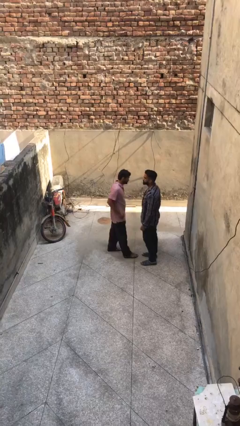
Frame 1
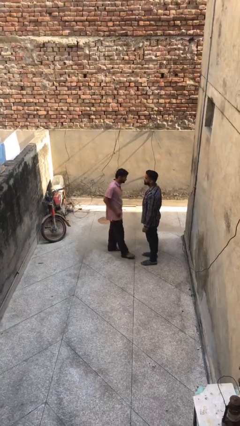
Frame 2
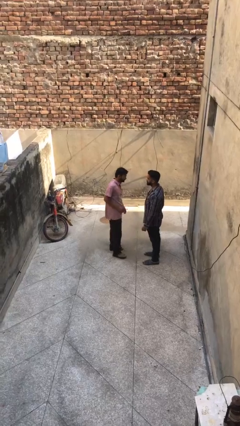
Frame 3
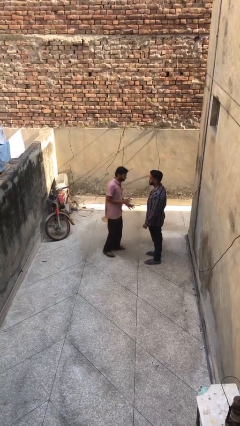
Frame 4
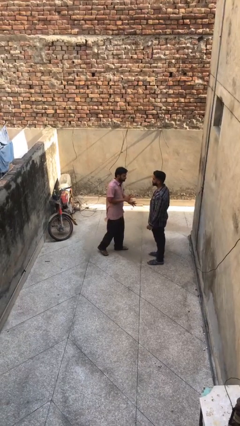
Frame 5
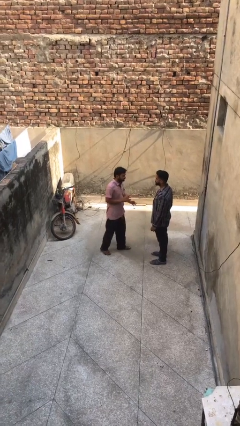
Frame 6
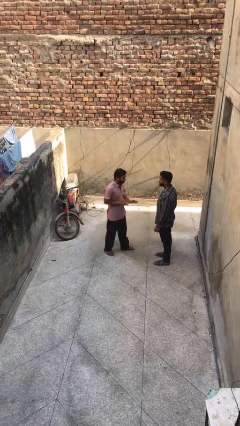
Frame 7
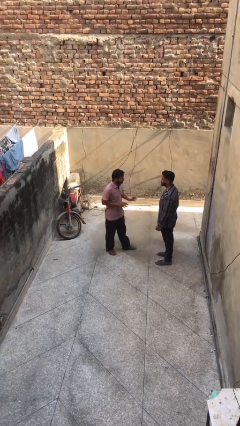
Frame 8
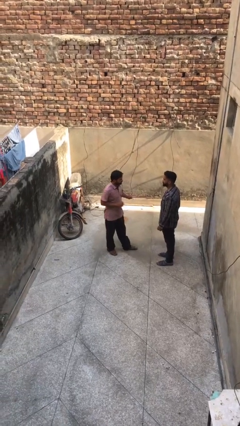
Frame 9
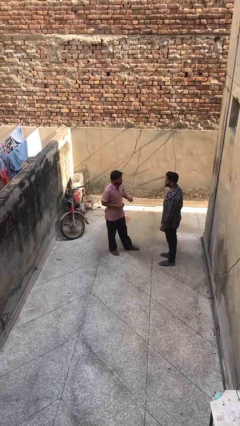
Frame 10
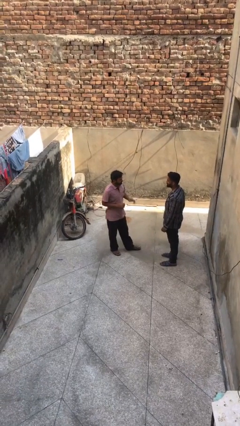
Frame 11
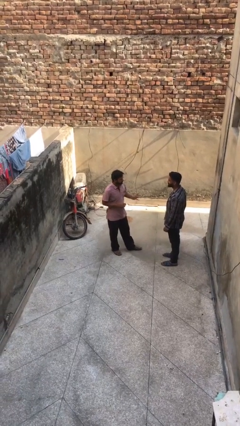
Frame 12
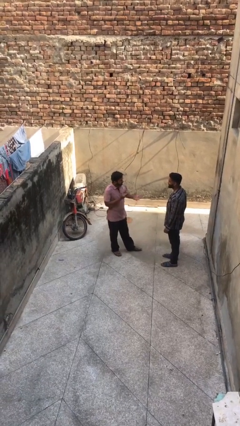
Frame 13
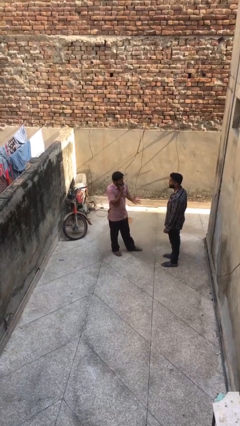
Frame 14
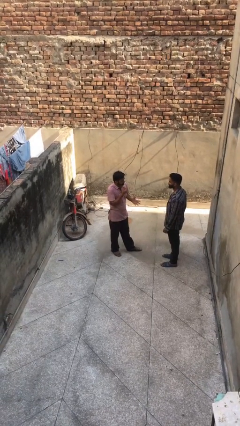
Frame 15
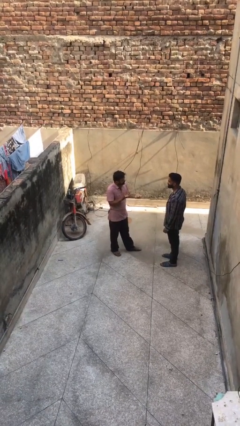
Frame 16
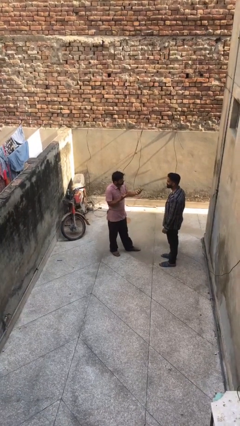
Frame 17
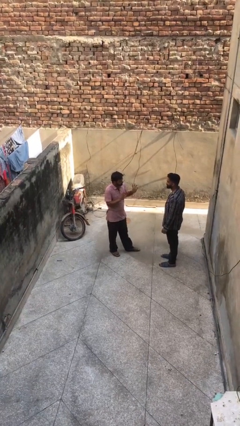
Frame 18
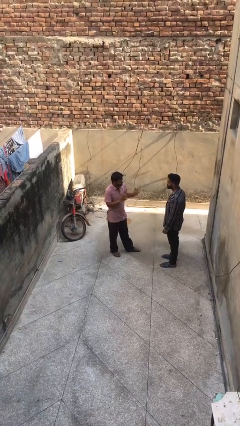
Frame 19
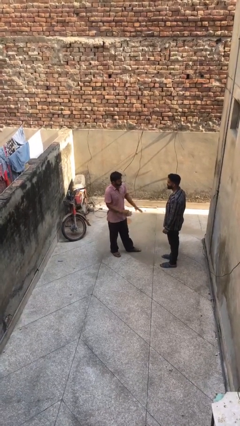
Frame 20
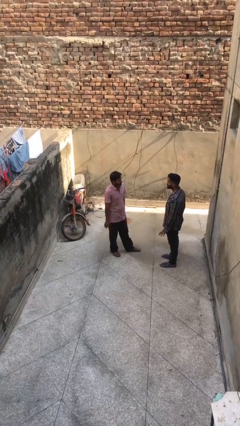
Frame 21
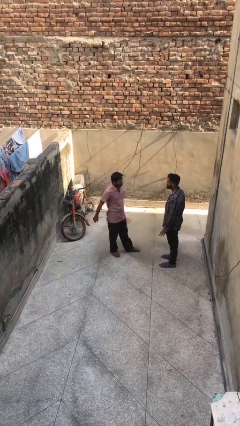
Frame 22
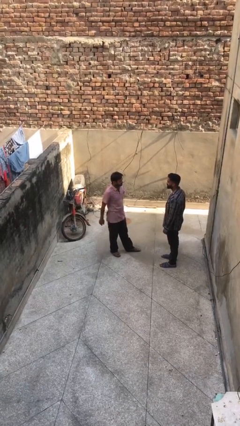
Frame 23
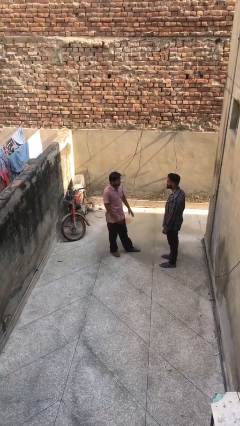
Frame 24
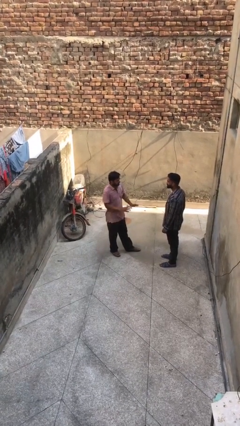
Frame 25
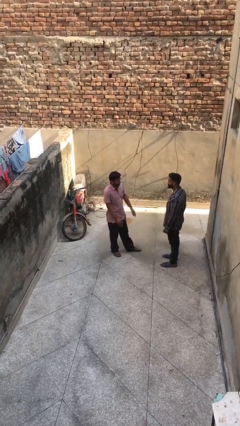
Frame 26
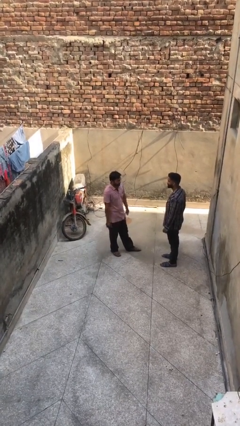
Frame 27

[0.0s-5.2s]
person talks to person

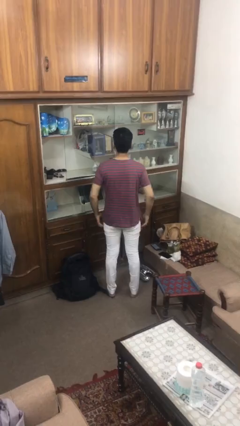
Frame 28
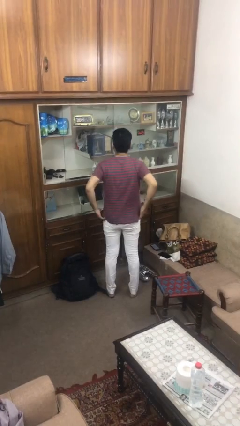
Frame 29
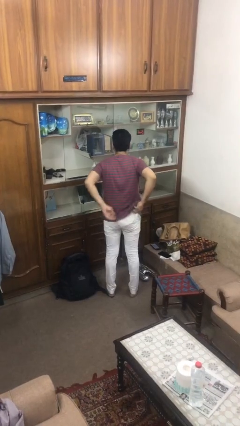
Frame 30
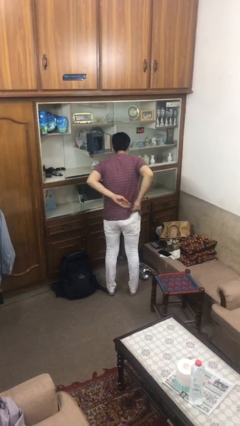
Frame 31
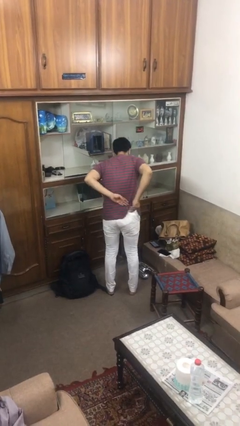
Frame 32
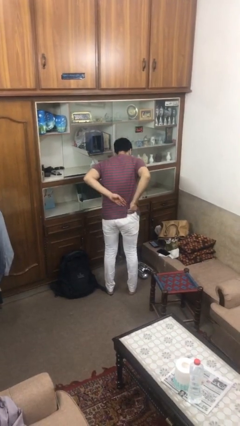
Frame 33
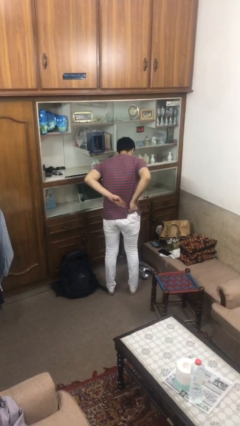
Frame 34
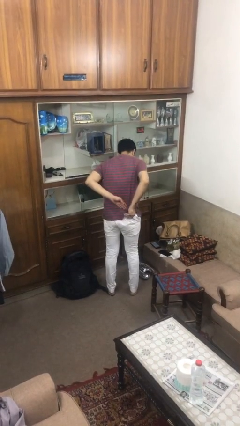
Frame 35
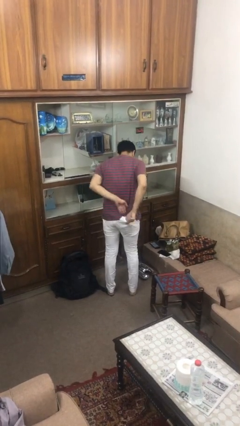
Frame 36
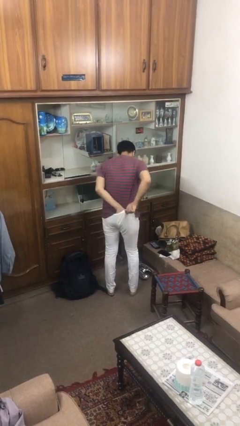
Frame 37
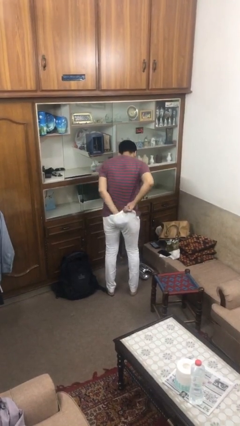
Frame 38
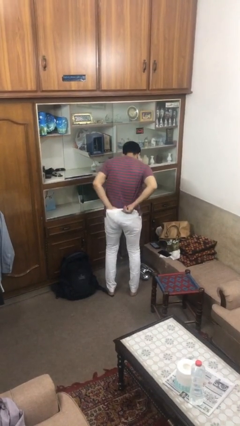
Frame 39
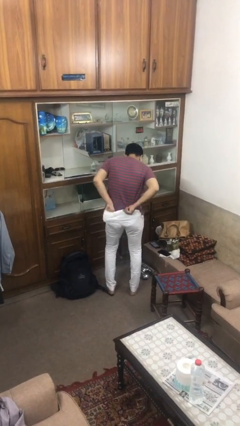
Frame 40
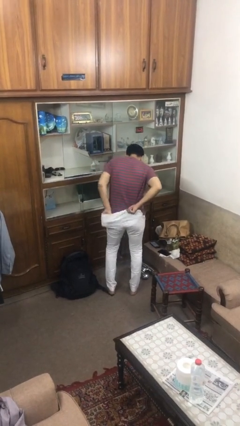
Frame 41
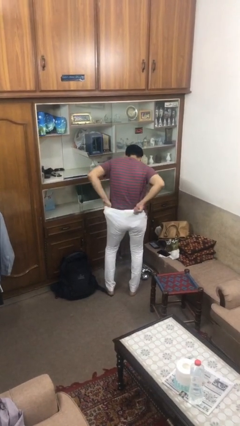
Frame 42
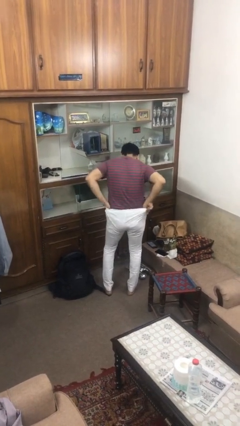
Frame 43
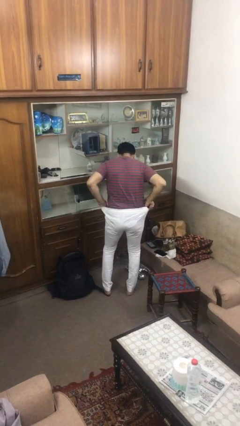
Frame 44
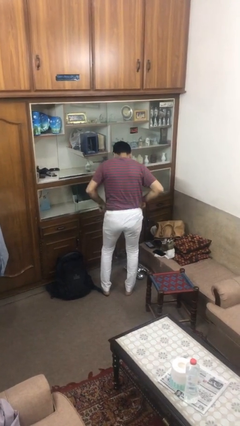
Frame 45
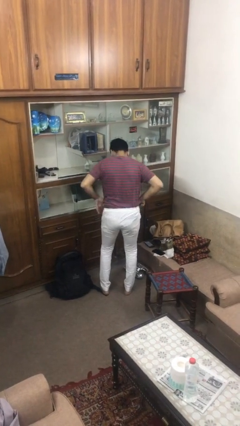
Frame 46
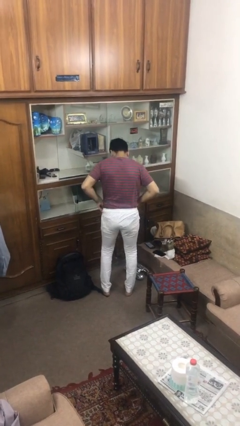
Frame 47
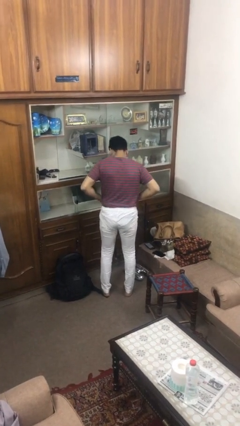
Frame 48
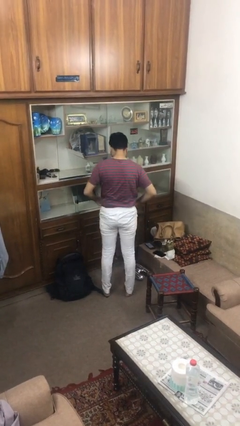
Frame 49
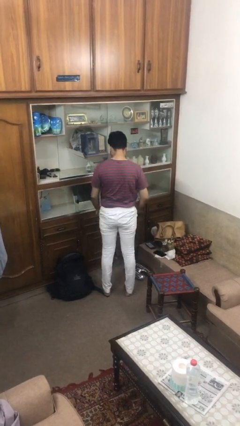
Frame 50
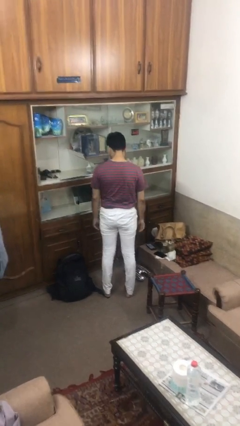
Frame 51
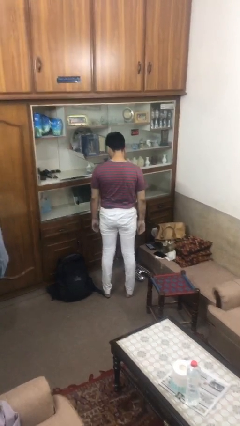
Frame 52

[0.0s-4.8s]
person tucks in shirt

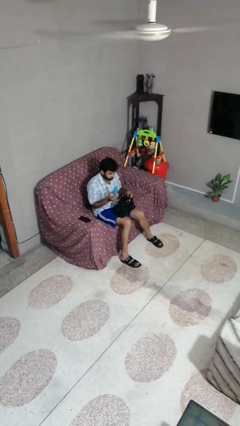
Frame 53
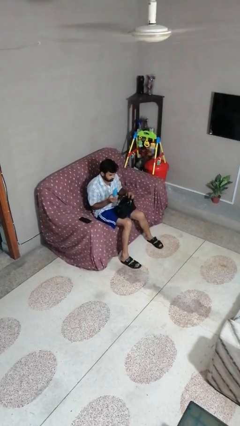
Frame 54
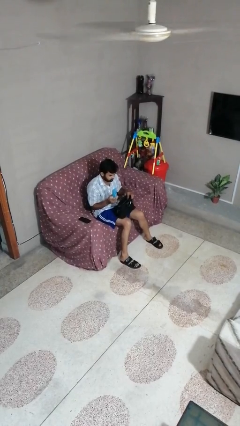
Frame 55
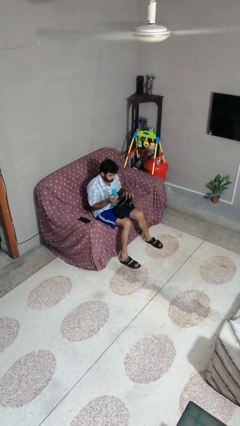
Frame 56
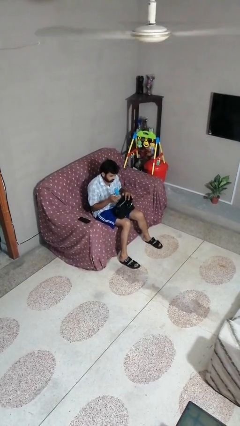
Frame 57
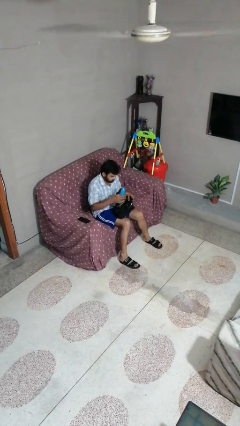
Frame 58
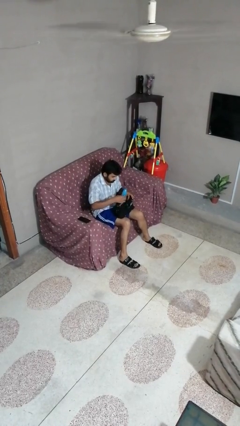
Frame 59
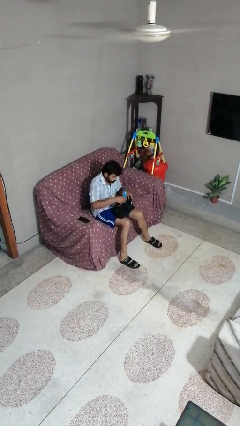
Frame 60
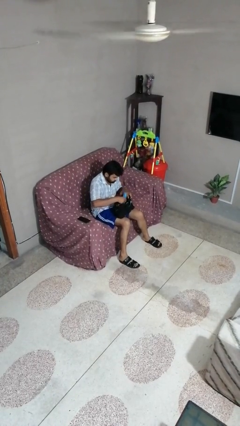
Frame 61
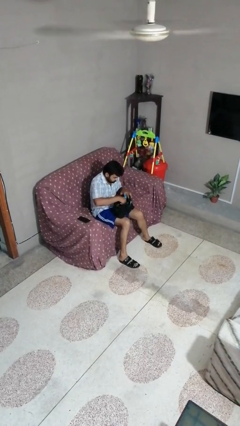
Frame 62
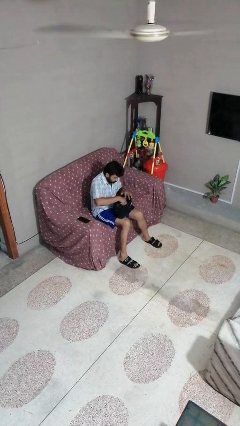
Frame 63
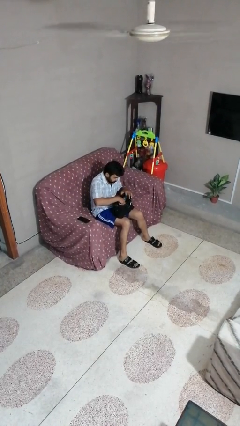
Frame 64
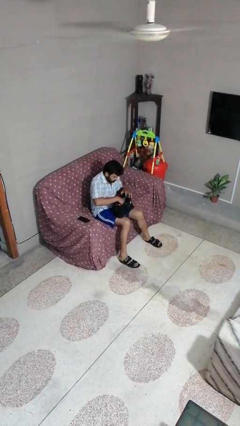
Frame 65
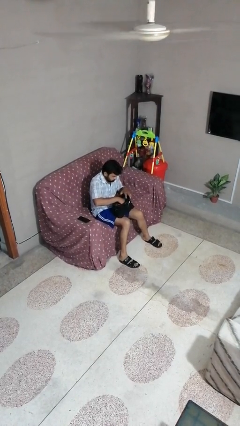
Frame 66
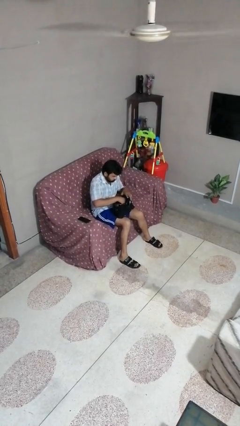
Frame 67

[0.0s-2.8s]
person puts object into purse

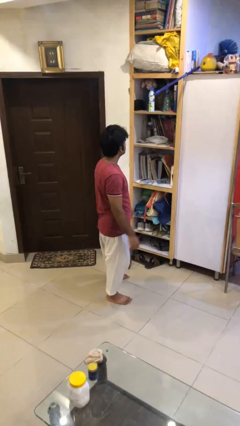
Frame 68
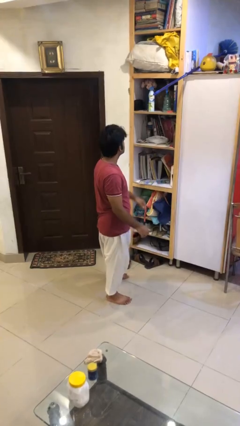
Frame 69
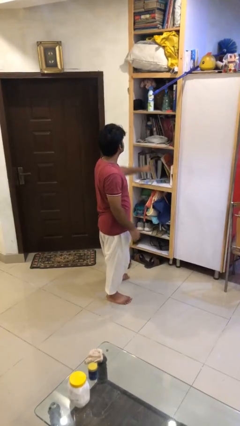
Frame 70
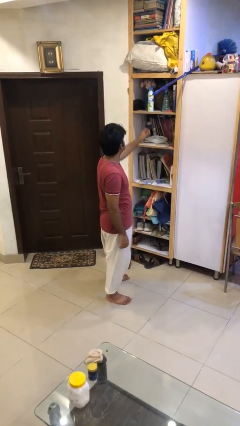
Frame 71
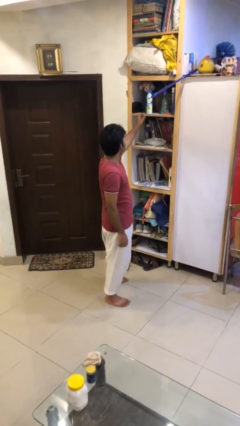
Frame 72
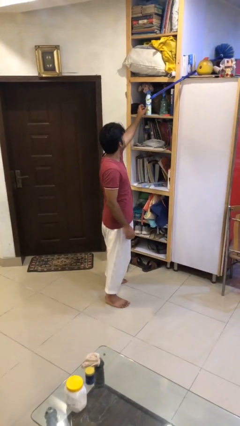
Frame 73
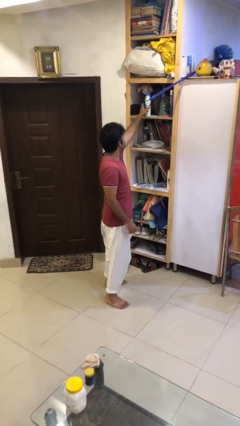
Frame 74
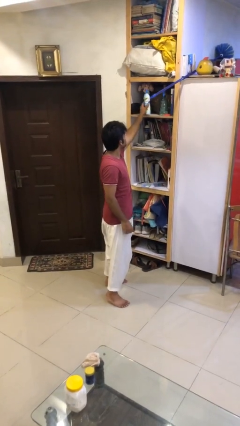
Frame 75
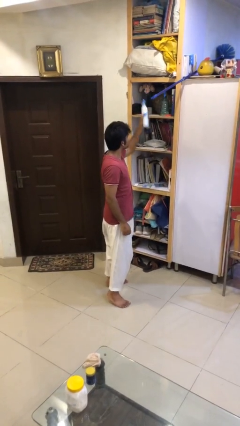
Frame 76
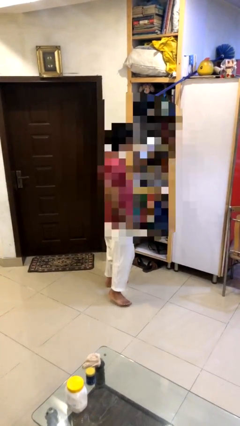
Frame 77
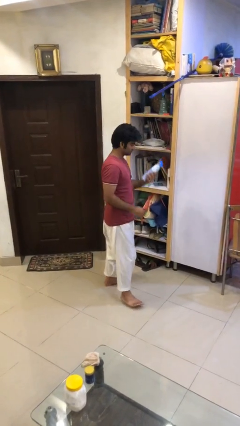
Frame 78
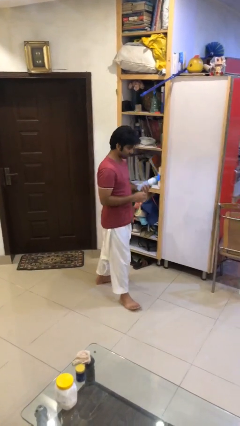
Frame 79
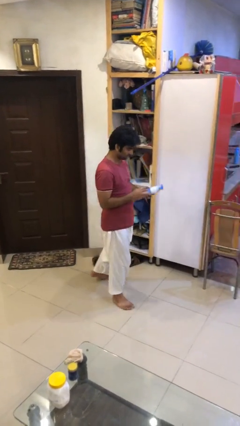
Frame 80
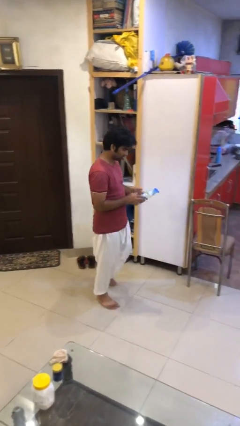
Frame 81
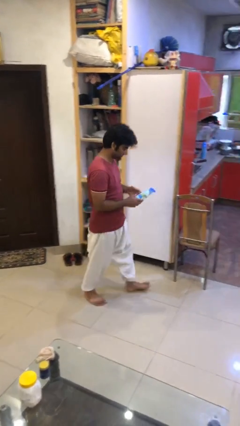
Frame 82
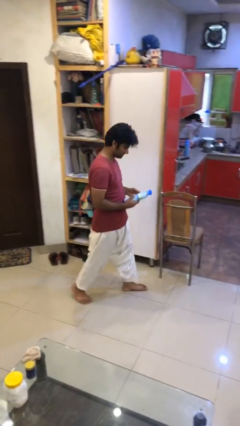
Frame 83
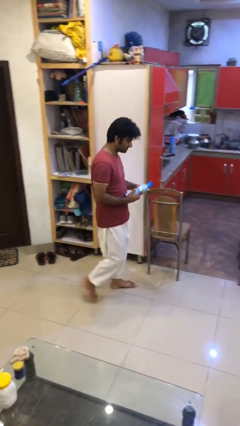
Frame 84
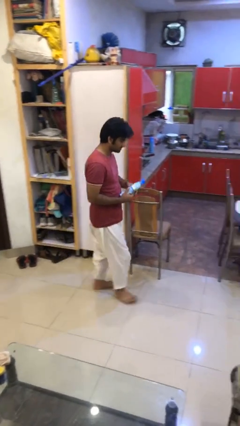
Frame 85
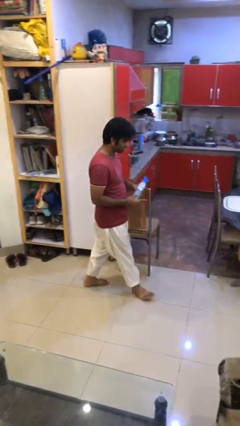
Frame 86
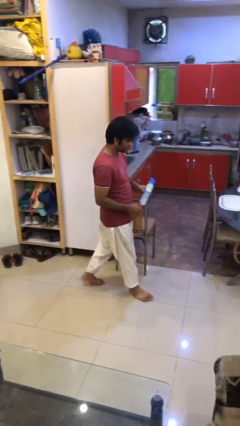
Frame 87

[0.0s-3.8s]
person picks up object from shelf

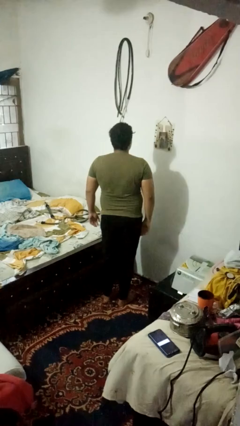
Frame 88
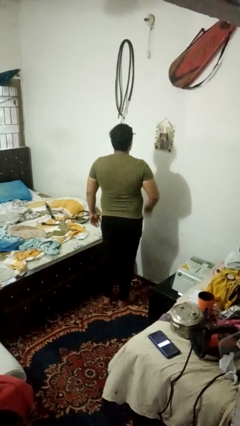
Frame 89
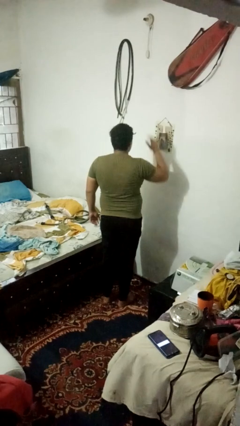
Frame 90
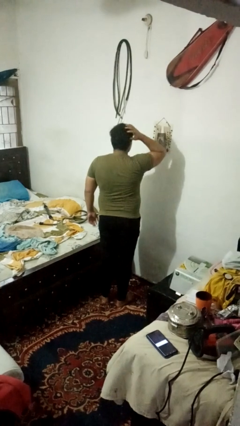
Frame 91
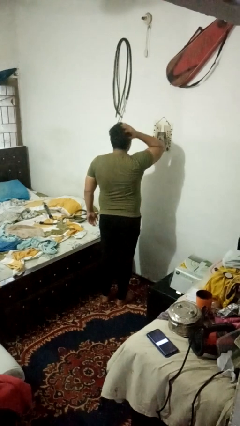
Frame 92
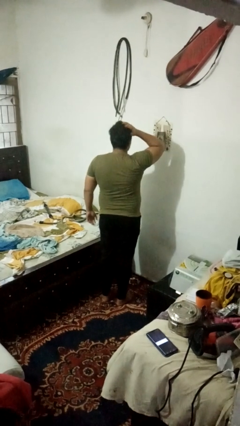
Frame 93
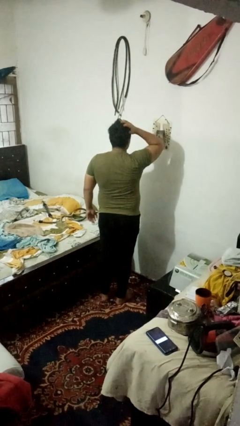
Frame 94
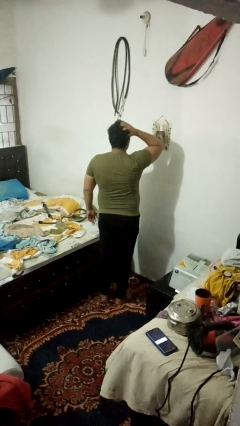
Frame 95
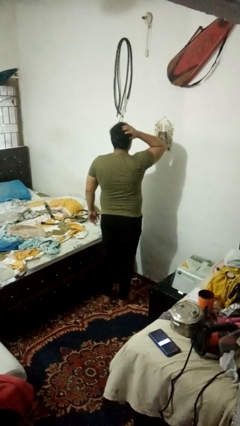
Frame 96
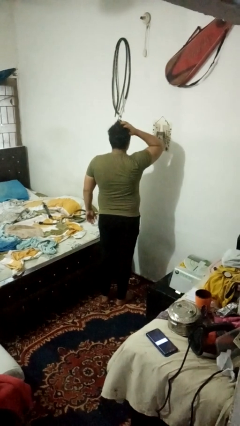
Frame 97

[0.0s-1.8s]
person strokes hair
